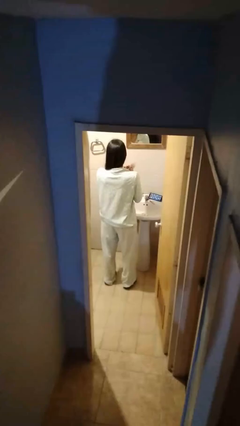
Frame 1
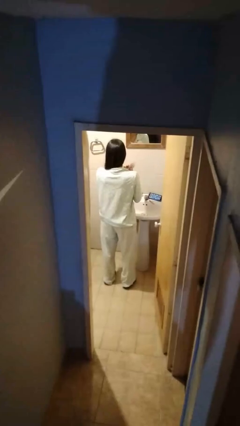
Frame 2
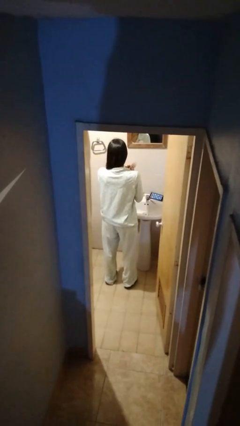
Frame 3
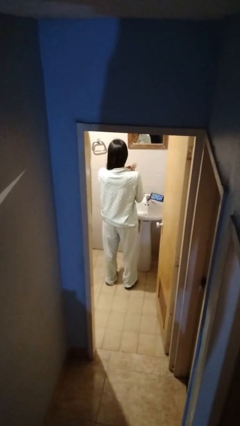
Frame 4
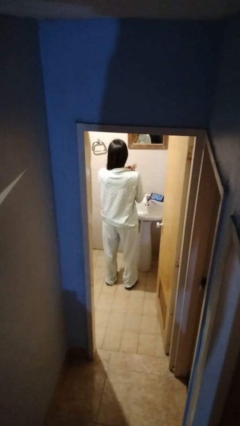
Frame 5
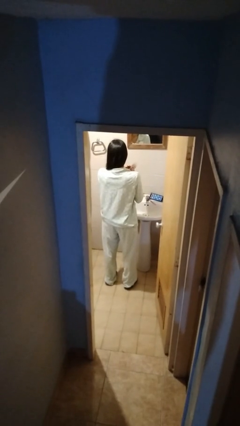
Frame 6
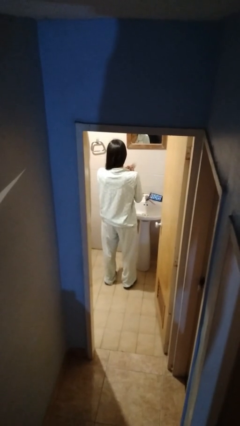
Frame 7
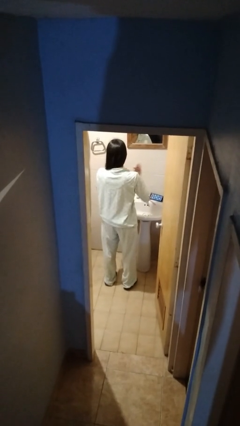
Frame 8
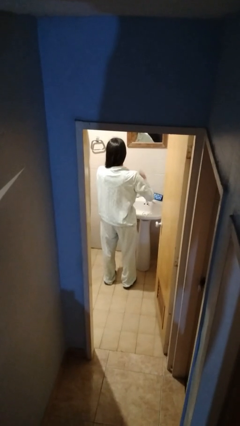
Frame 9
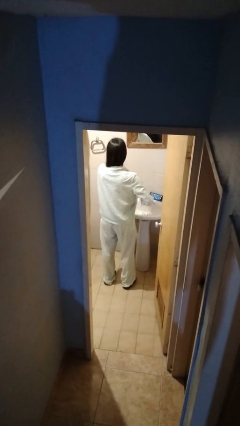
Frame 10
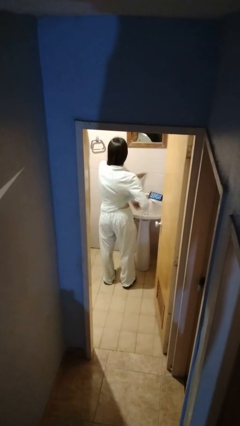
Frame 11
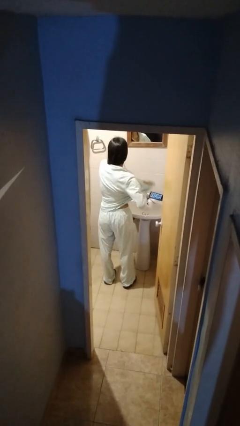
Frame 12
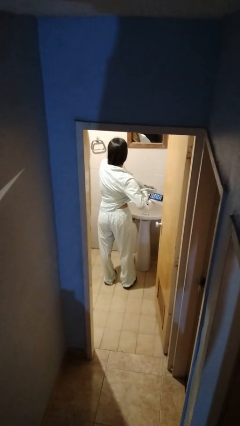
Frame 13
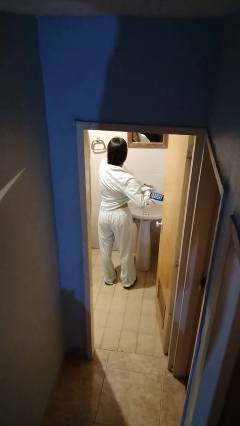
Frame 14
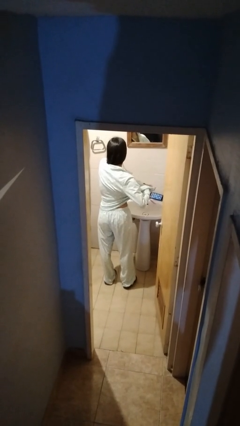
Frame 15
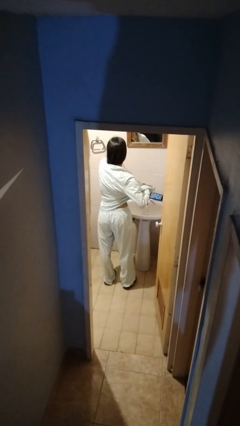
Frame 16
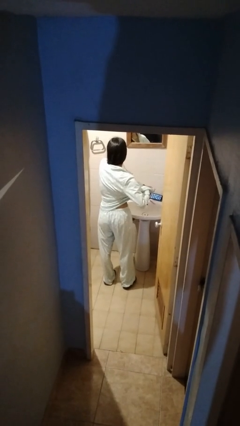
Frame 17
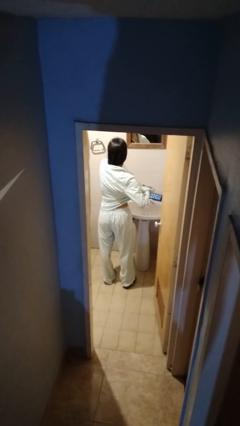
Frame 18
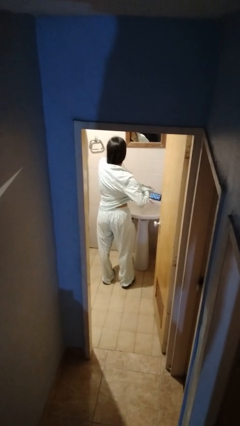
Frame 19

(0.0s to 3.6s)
person applies deodorant

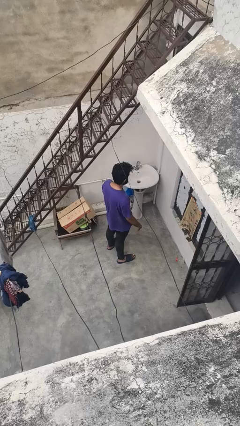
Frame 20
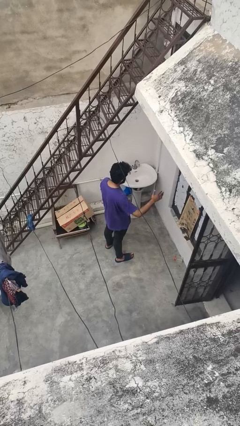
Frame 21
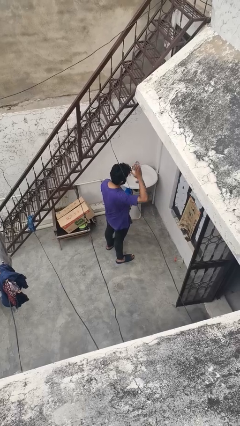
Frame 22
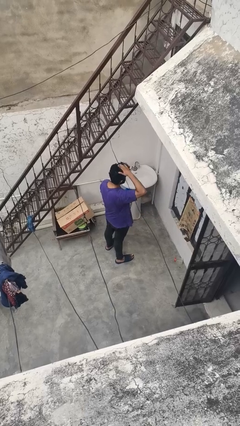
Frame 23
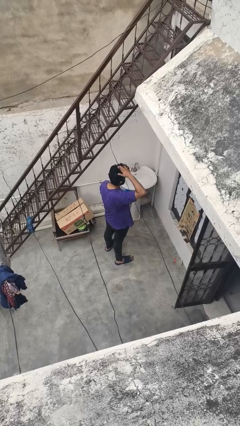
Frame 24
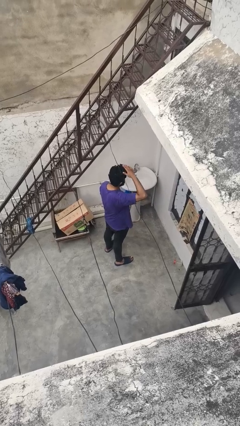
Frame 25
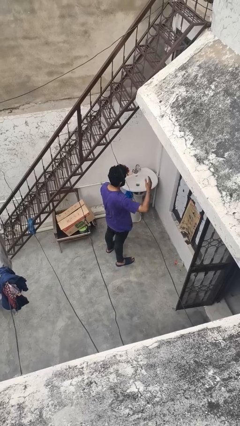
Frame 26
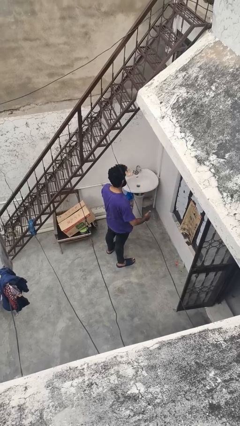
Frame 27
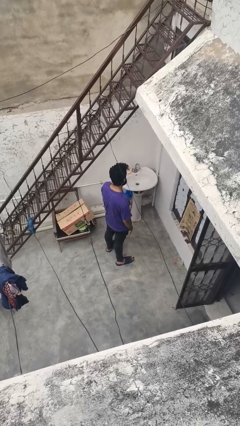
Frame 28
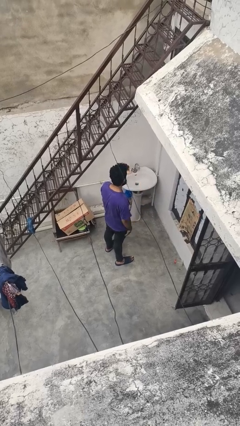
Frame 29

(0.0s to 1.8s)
person pats head

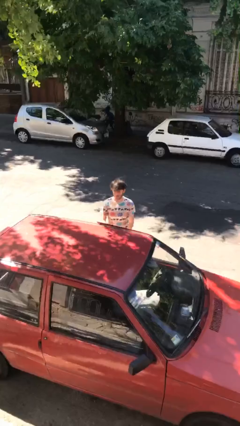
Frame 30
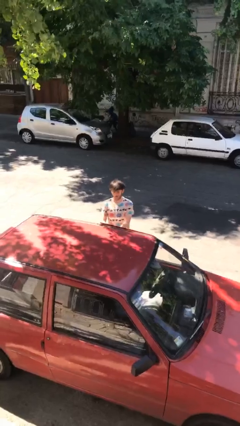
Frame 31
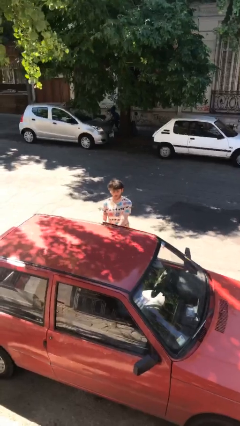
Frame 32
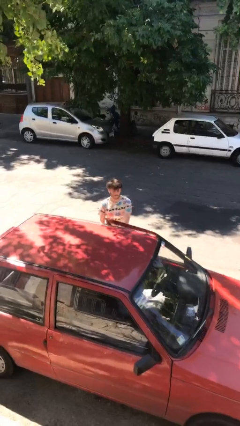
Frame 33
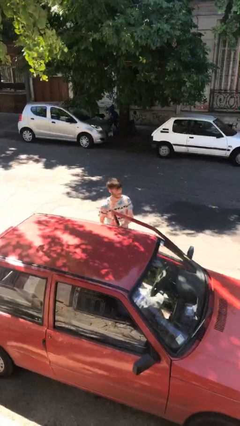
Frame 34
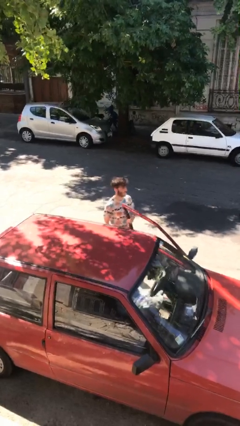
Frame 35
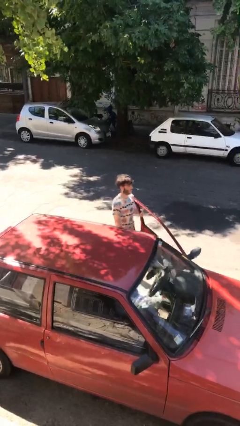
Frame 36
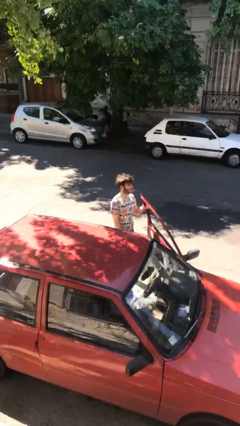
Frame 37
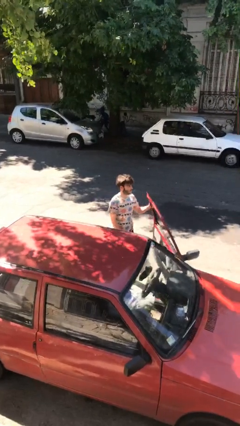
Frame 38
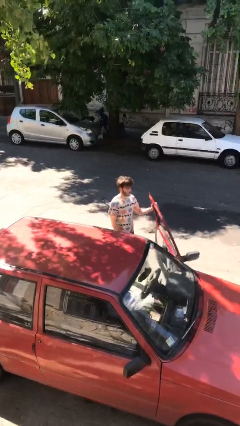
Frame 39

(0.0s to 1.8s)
person opens car door

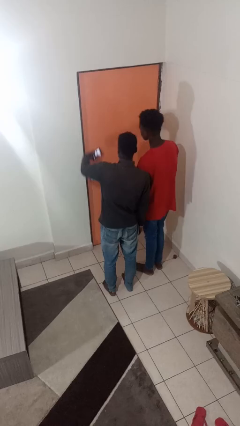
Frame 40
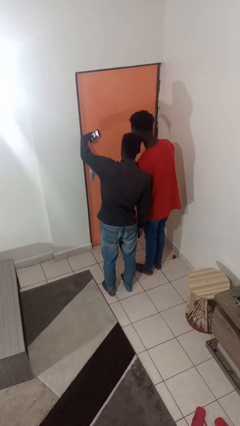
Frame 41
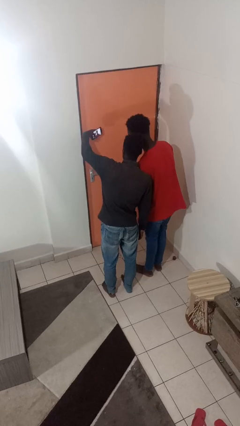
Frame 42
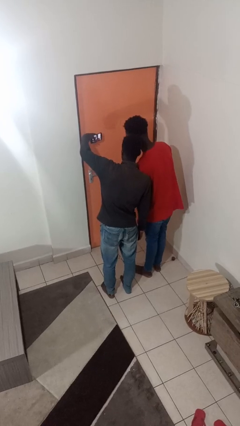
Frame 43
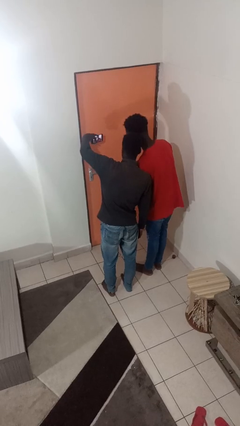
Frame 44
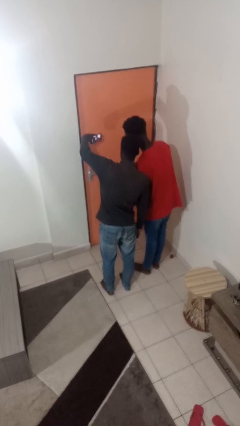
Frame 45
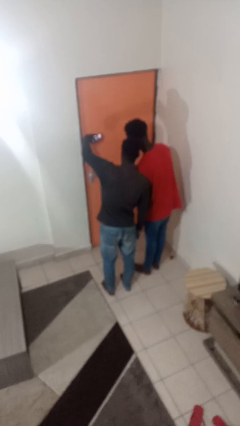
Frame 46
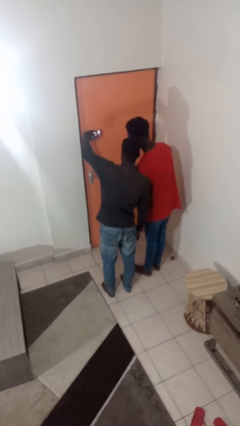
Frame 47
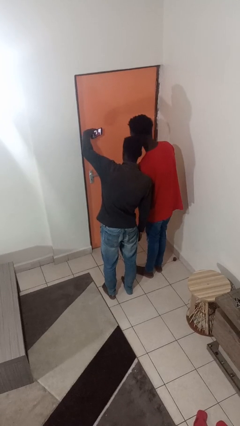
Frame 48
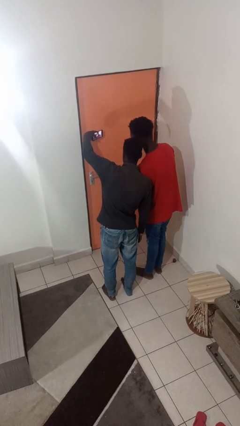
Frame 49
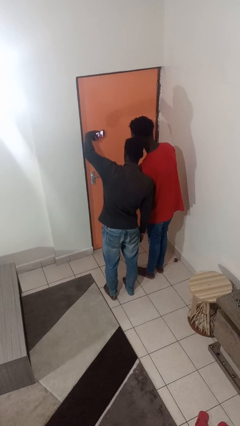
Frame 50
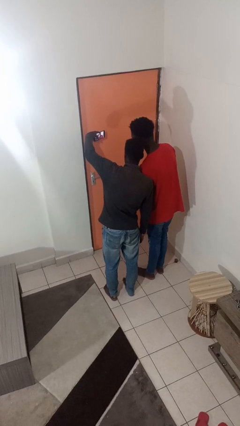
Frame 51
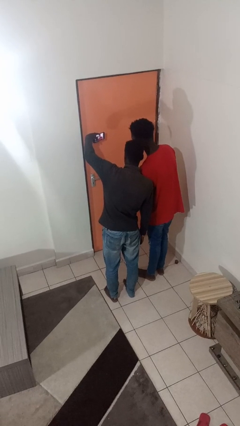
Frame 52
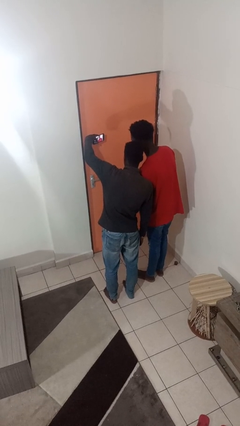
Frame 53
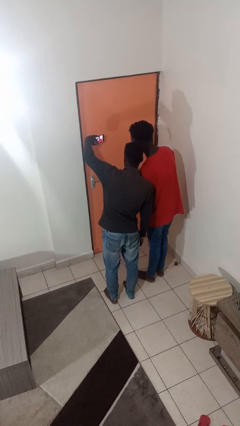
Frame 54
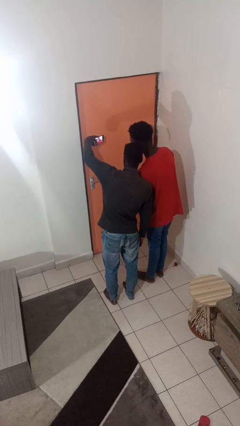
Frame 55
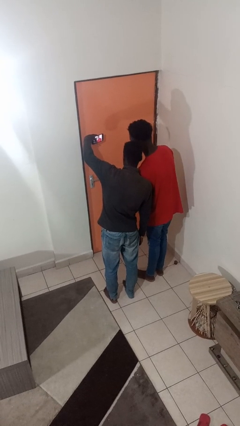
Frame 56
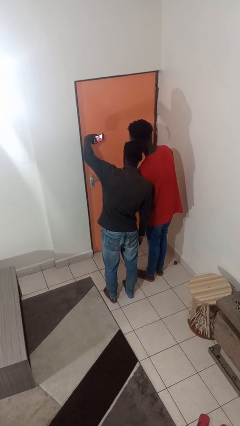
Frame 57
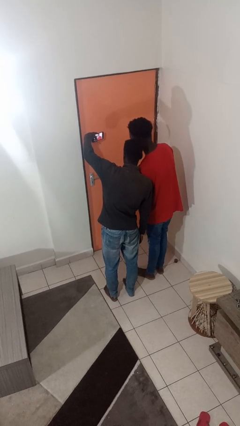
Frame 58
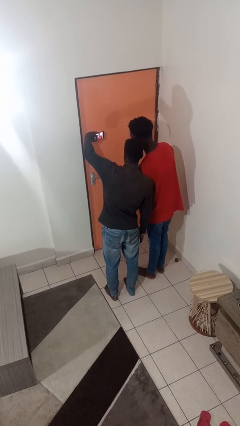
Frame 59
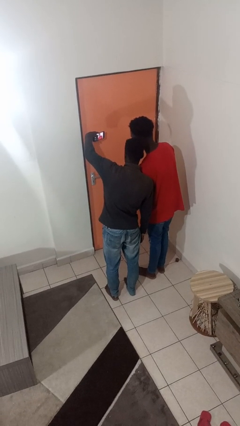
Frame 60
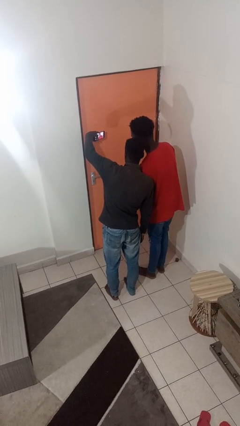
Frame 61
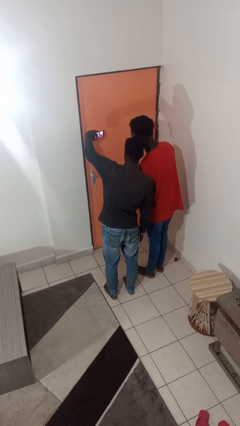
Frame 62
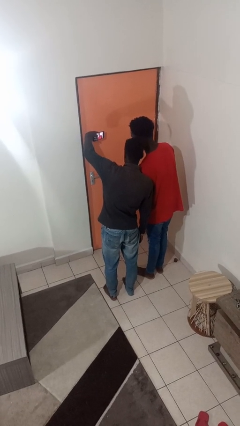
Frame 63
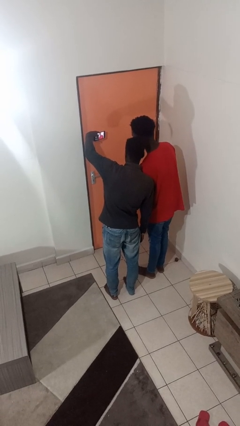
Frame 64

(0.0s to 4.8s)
person takes selfie with person

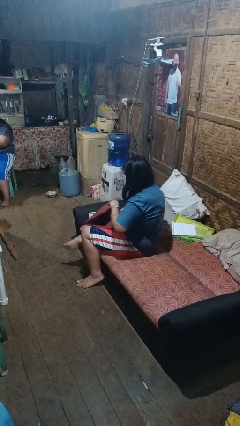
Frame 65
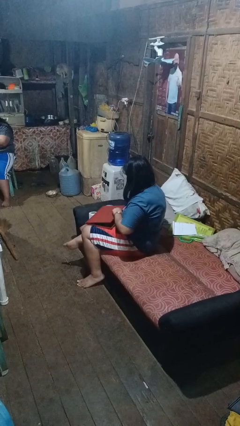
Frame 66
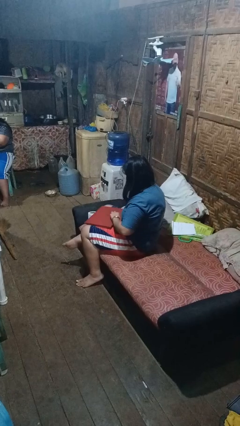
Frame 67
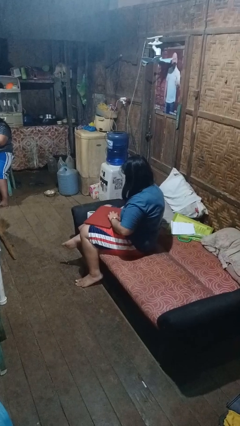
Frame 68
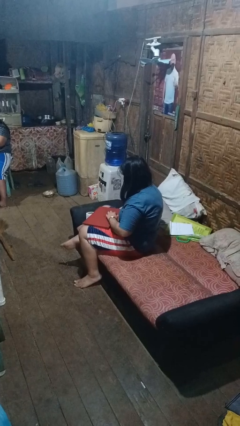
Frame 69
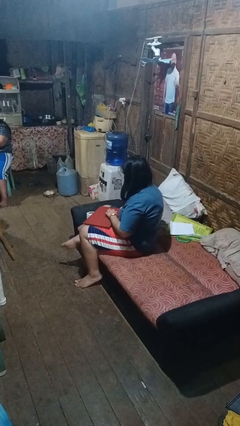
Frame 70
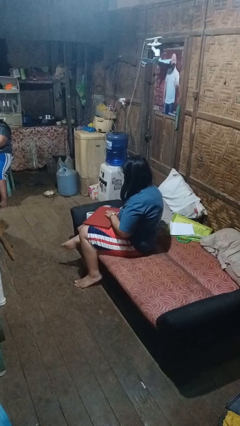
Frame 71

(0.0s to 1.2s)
person closes laptop

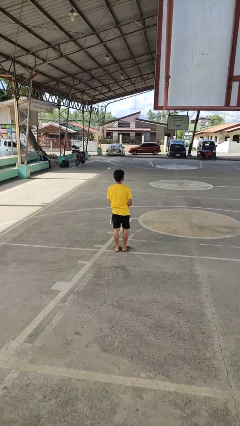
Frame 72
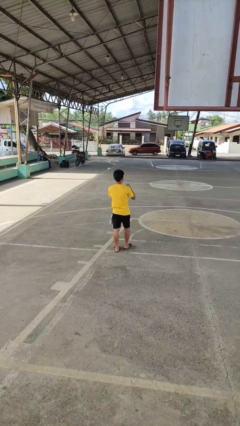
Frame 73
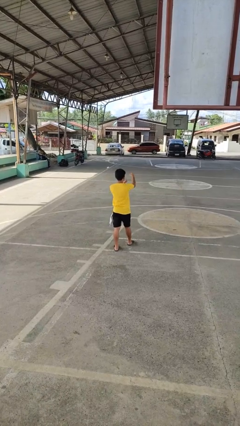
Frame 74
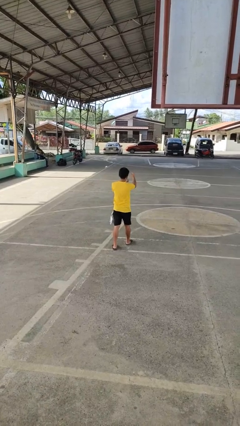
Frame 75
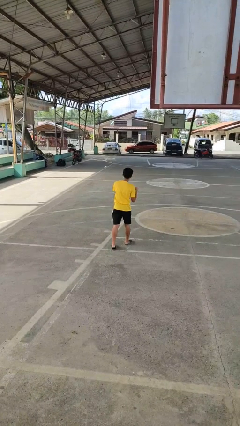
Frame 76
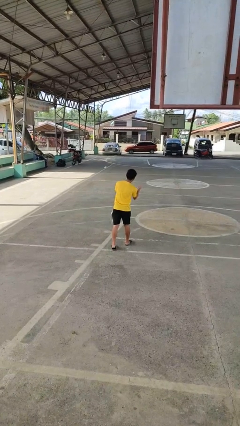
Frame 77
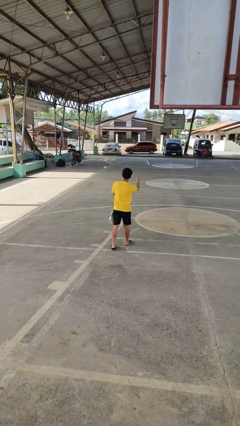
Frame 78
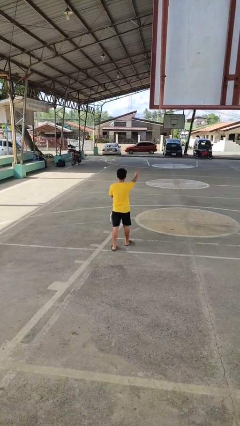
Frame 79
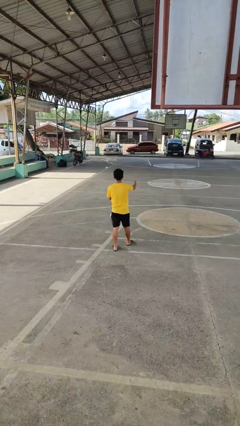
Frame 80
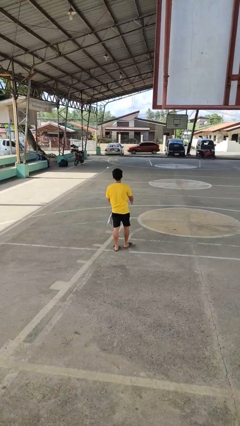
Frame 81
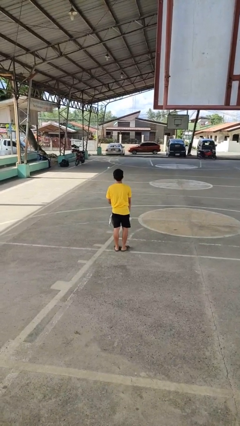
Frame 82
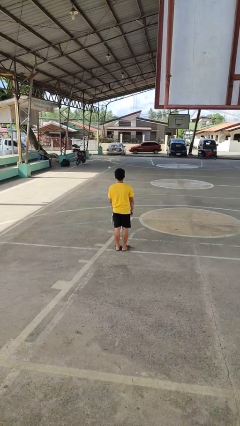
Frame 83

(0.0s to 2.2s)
person punches

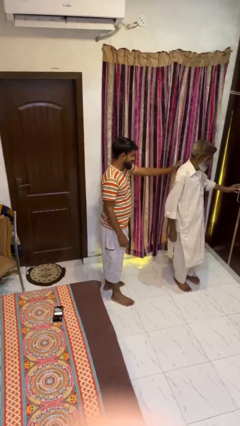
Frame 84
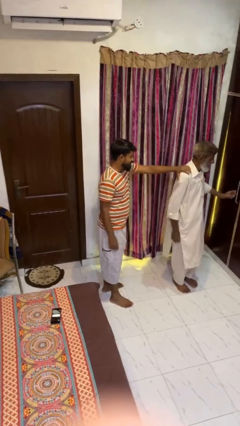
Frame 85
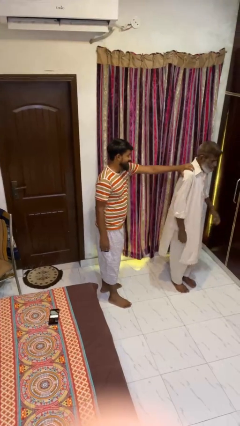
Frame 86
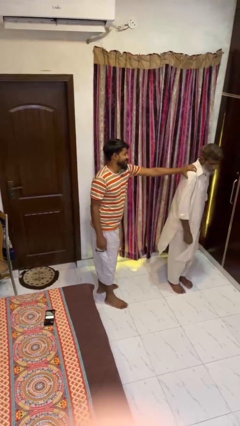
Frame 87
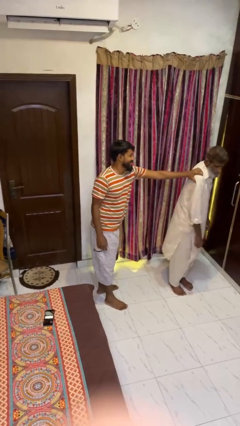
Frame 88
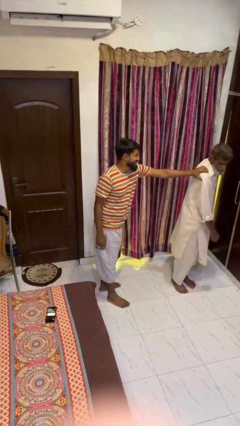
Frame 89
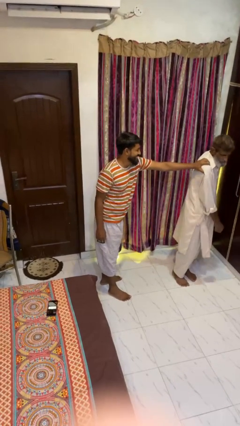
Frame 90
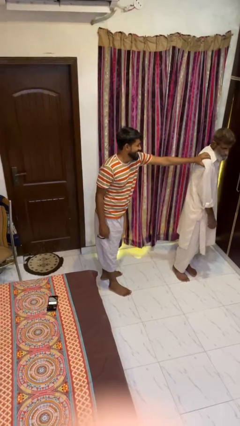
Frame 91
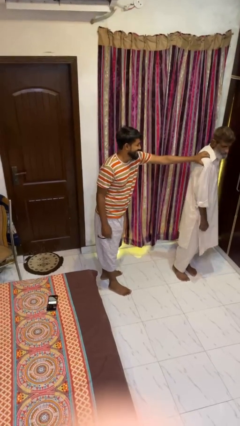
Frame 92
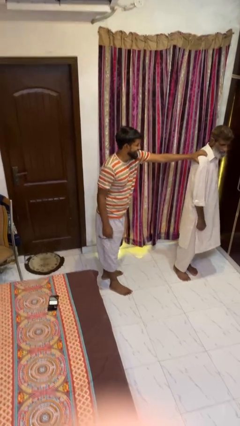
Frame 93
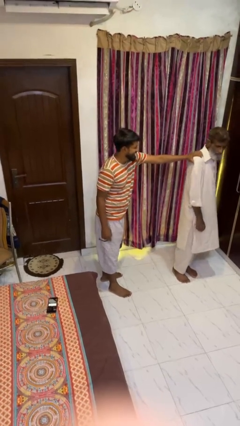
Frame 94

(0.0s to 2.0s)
person grabs person by shoulder
